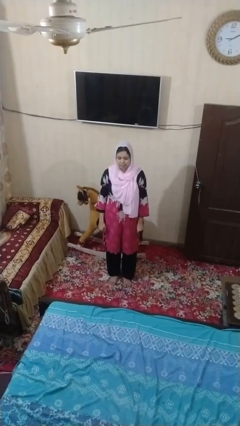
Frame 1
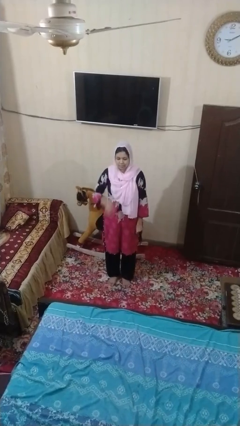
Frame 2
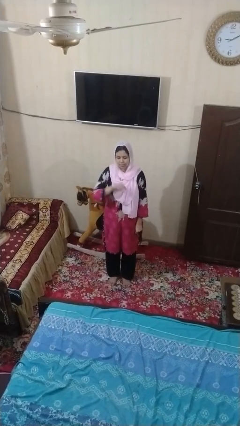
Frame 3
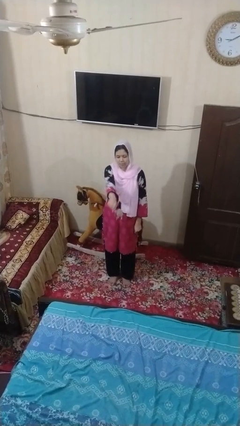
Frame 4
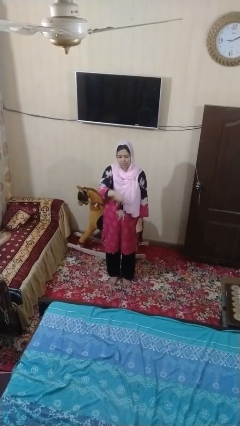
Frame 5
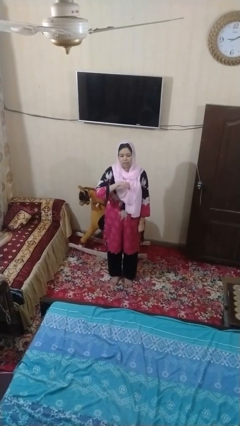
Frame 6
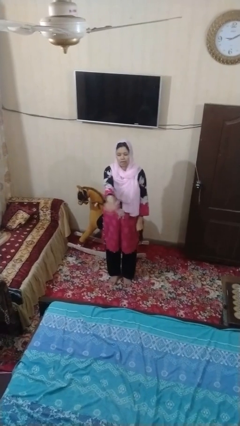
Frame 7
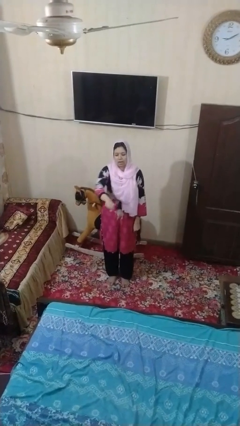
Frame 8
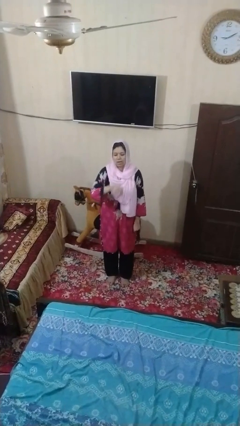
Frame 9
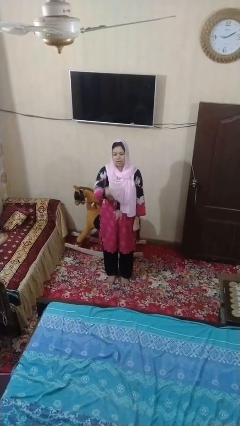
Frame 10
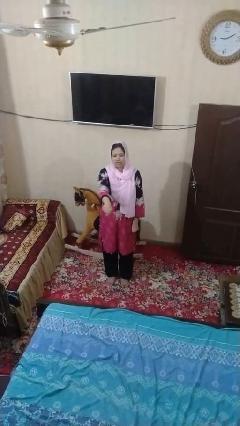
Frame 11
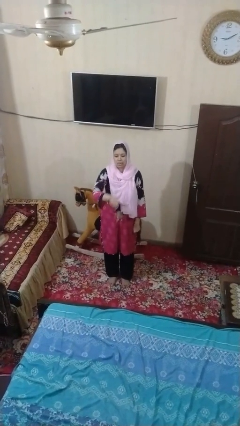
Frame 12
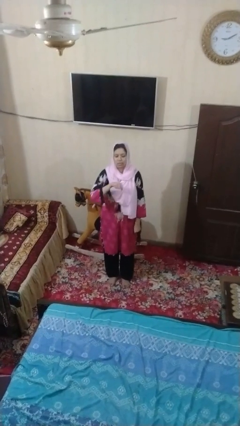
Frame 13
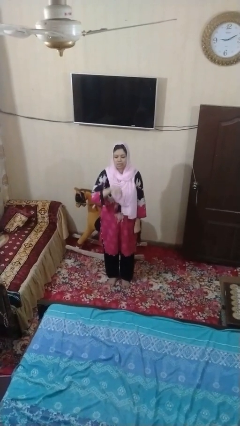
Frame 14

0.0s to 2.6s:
person punches

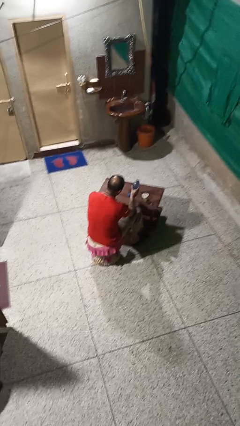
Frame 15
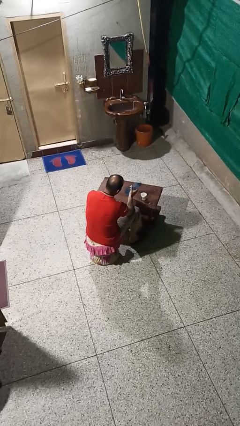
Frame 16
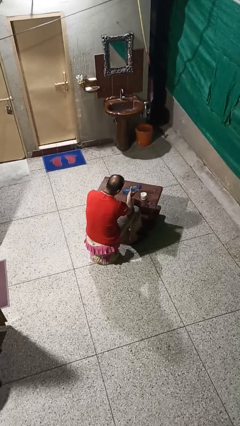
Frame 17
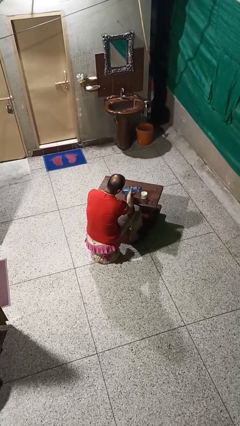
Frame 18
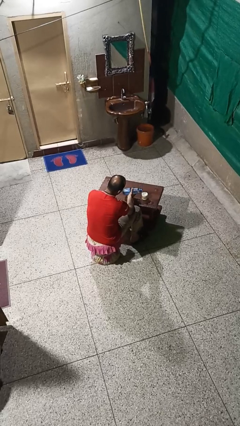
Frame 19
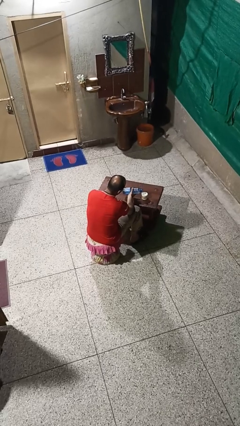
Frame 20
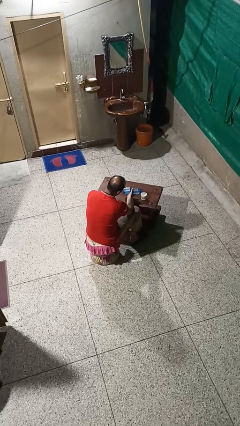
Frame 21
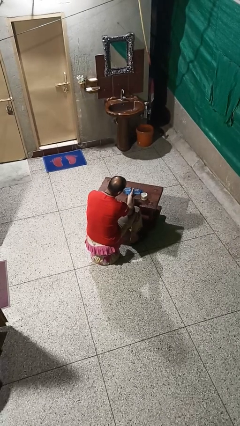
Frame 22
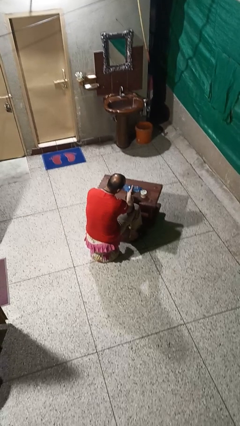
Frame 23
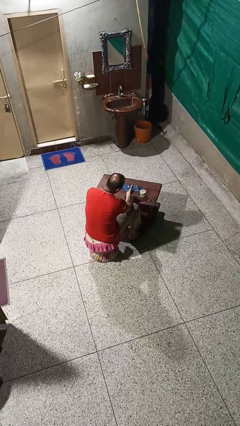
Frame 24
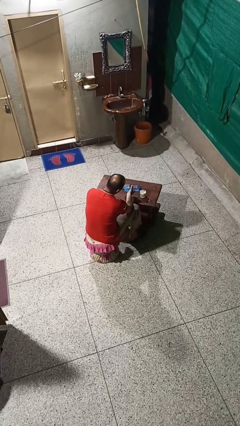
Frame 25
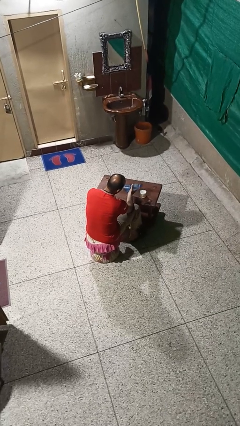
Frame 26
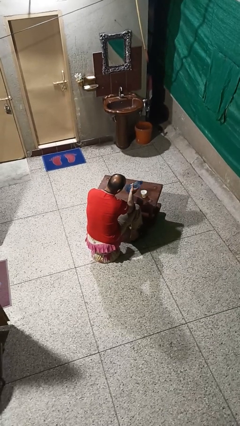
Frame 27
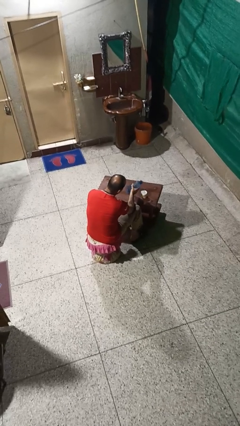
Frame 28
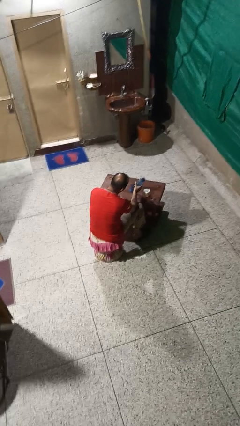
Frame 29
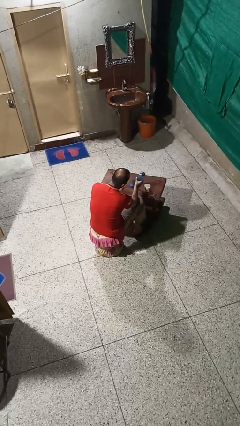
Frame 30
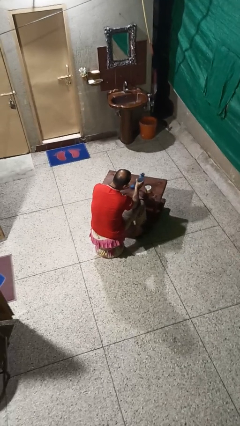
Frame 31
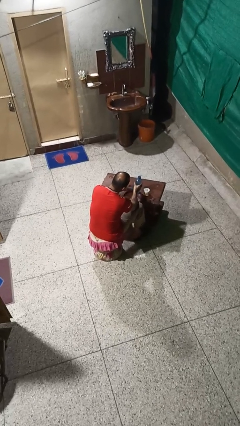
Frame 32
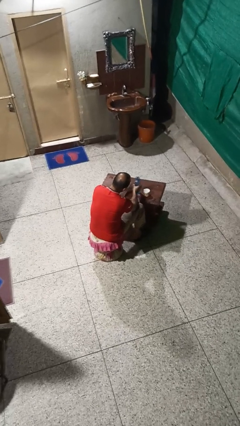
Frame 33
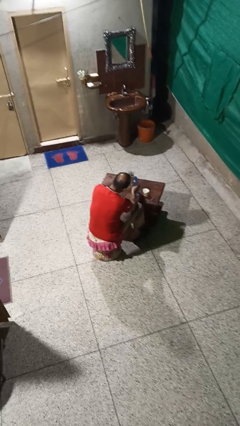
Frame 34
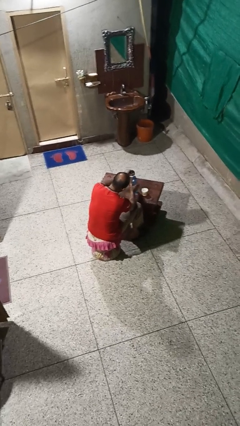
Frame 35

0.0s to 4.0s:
person pours liquid into cup

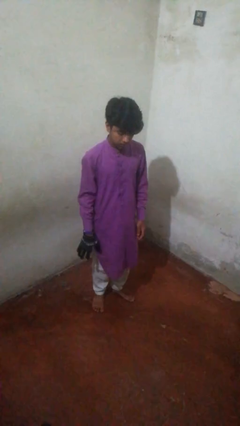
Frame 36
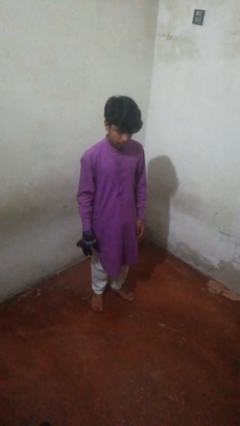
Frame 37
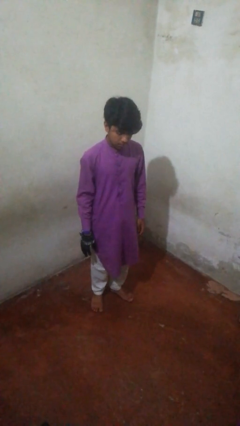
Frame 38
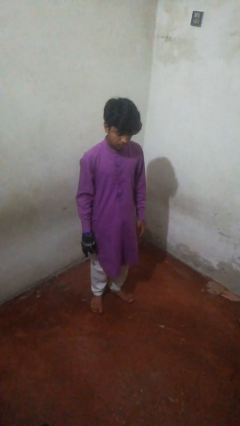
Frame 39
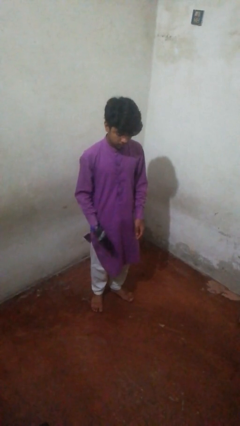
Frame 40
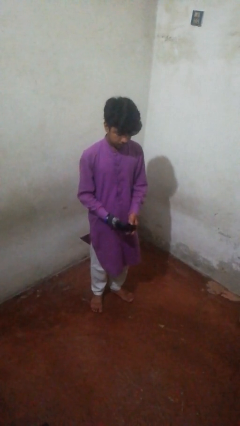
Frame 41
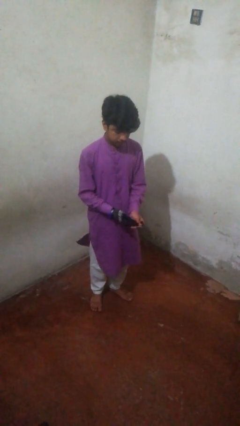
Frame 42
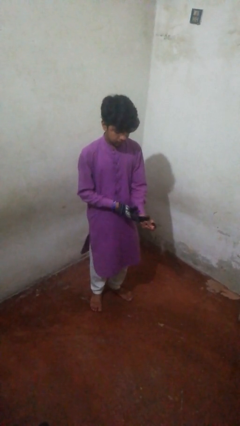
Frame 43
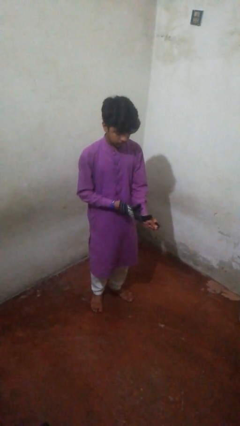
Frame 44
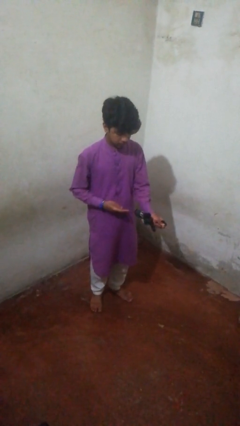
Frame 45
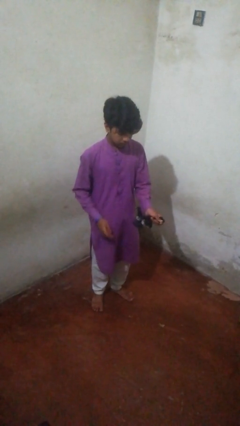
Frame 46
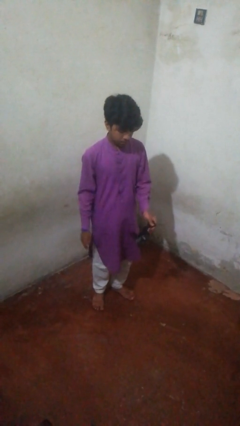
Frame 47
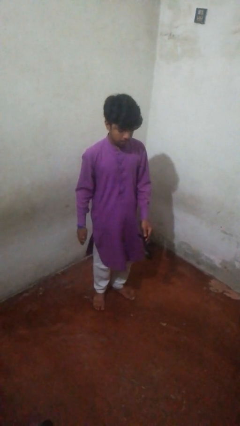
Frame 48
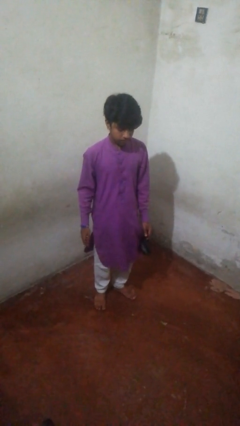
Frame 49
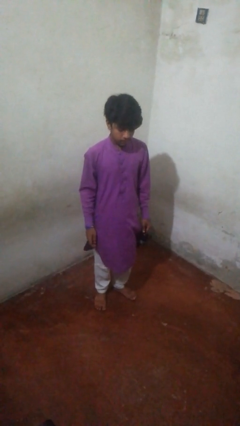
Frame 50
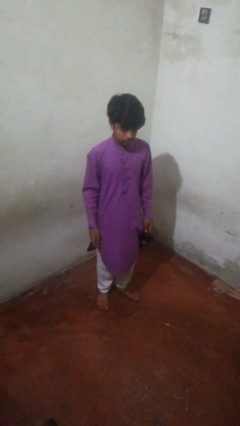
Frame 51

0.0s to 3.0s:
person takes off gloves

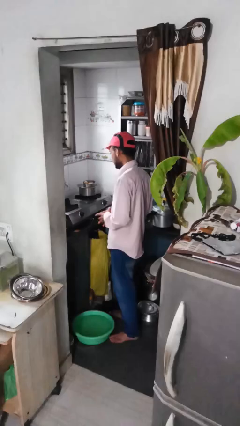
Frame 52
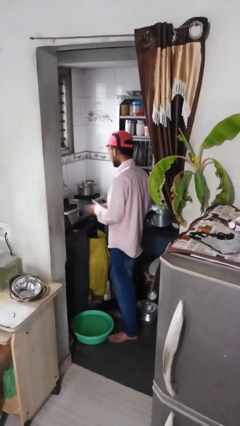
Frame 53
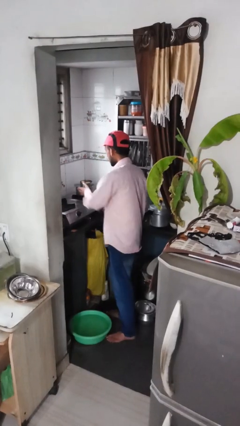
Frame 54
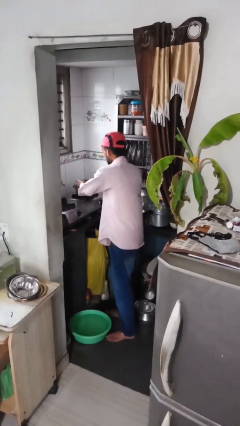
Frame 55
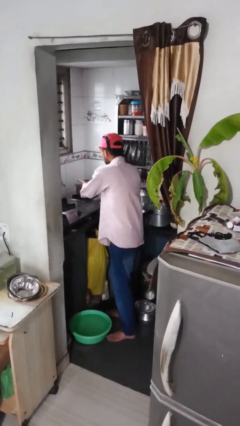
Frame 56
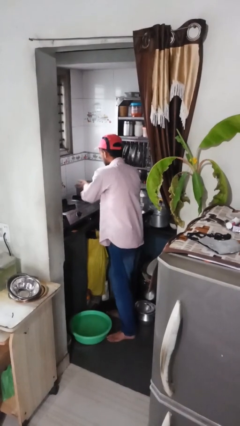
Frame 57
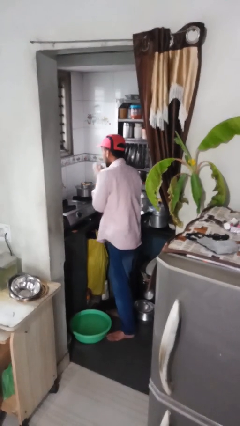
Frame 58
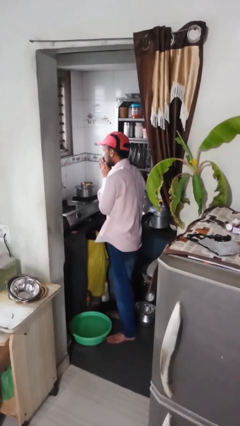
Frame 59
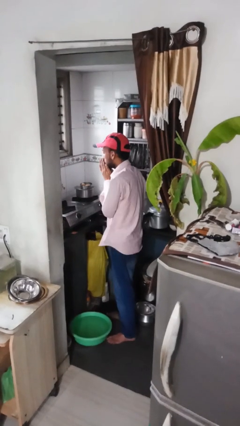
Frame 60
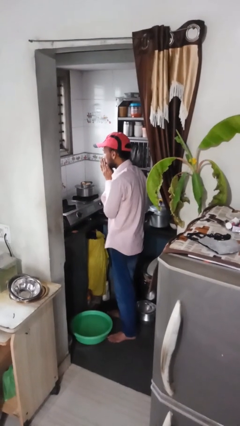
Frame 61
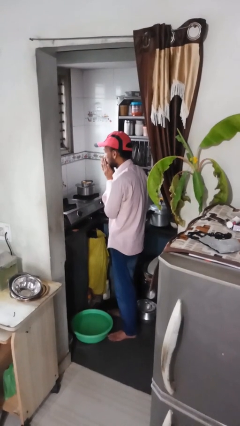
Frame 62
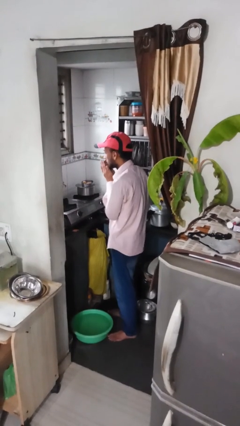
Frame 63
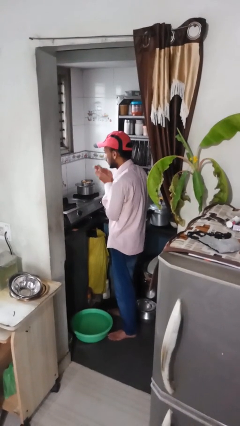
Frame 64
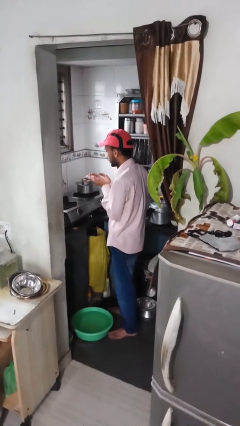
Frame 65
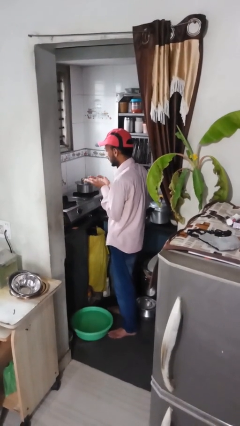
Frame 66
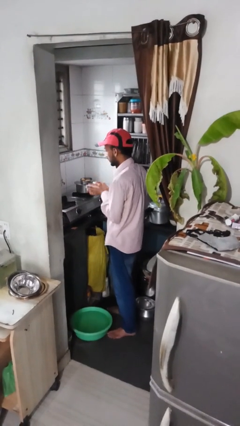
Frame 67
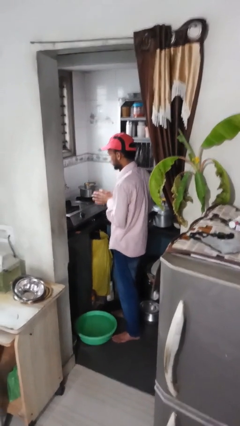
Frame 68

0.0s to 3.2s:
person burns hand

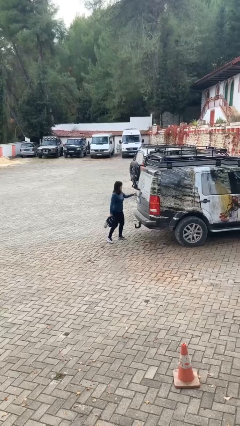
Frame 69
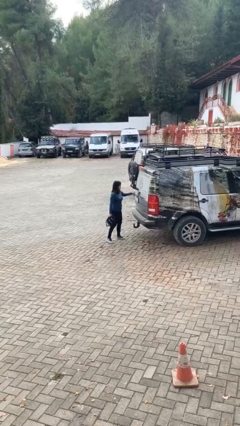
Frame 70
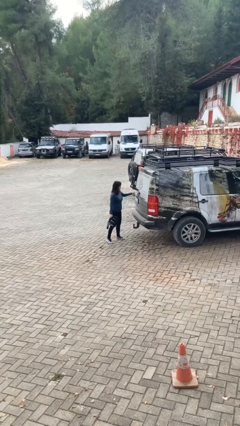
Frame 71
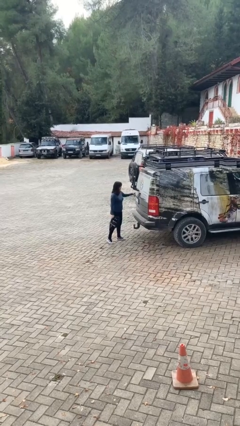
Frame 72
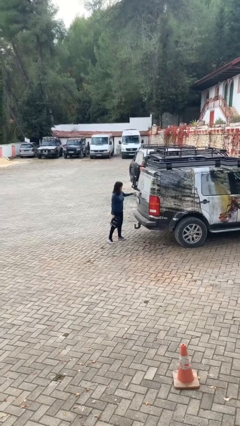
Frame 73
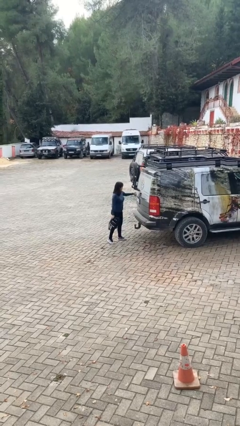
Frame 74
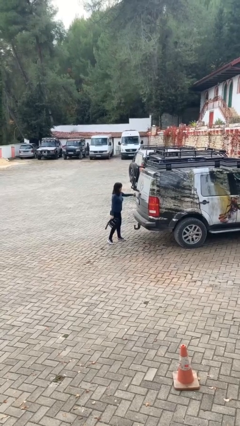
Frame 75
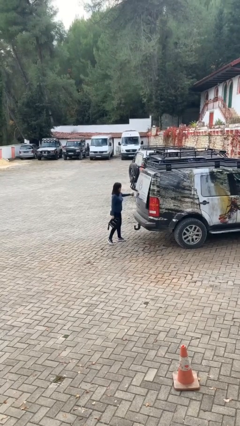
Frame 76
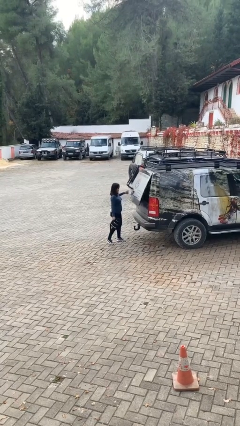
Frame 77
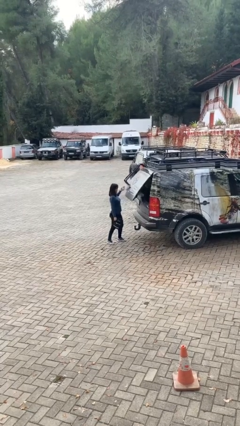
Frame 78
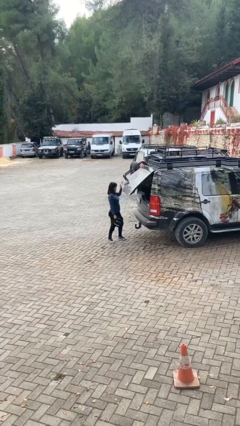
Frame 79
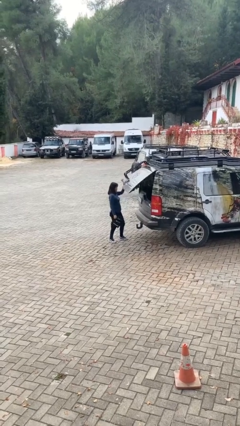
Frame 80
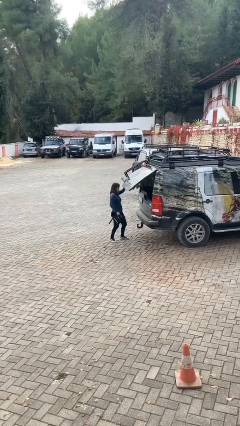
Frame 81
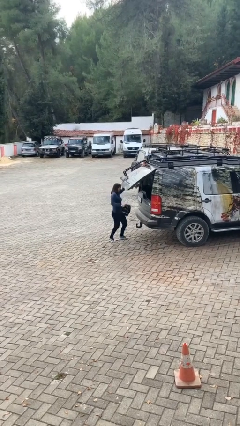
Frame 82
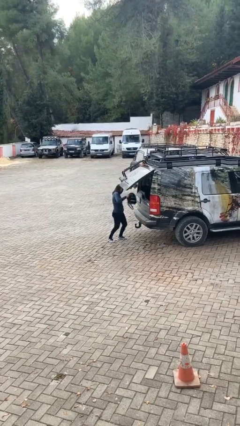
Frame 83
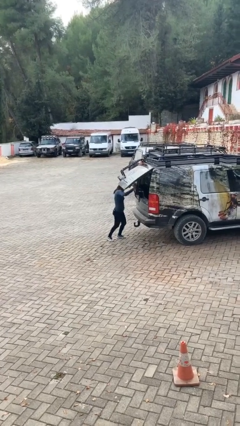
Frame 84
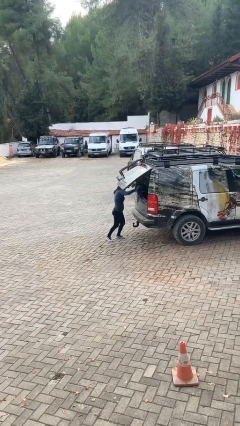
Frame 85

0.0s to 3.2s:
person opens car trunk

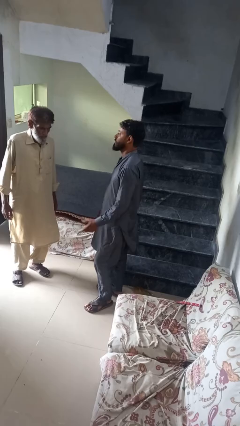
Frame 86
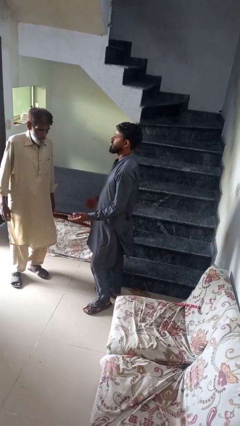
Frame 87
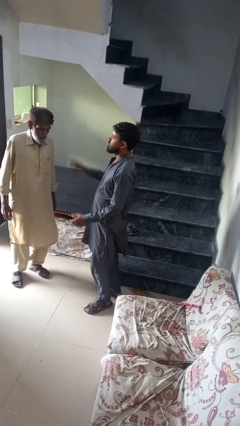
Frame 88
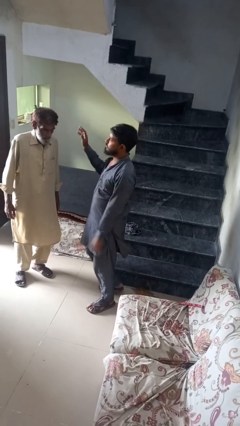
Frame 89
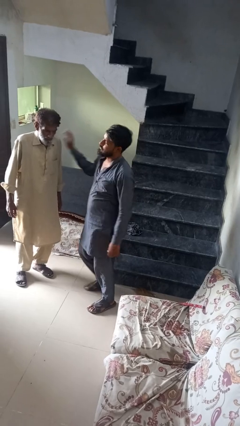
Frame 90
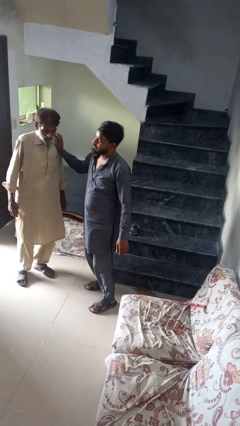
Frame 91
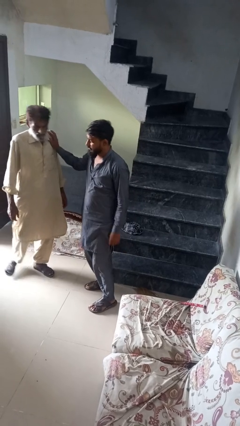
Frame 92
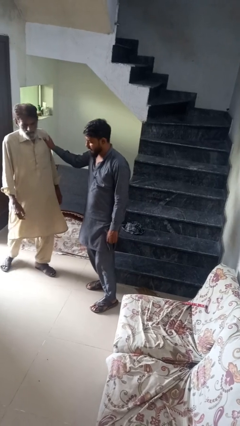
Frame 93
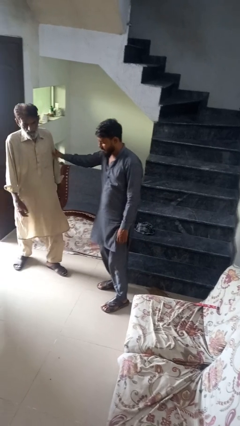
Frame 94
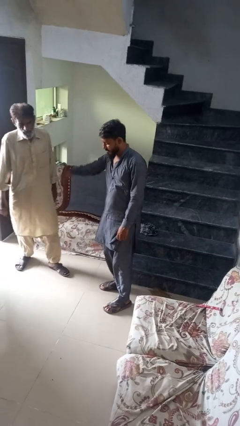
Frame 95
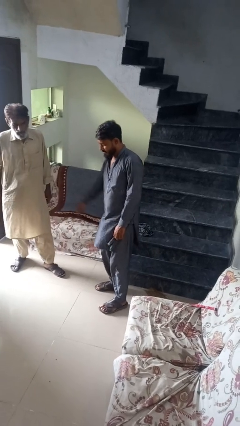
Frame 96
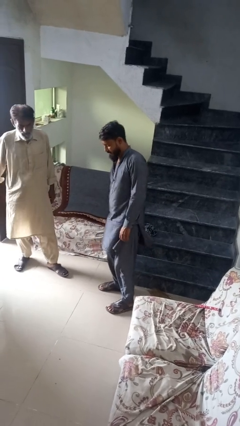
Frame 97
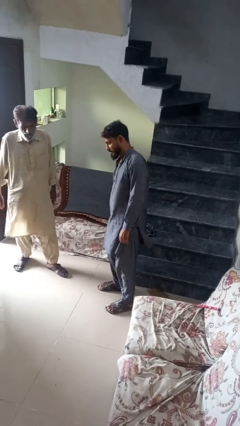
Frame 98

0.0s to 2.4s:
person shoves person
